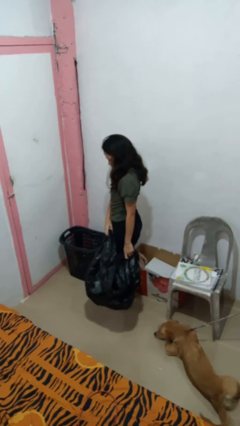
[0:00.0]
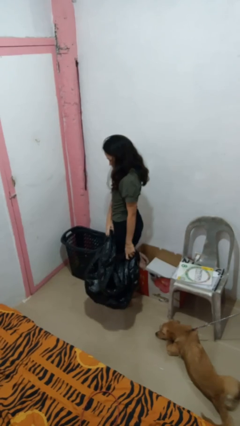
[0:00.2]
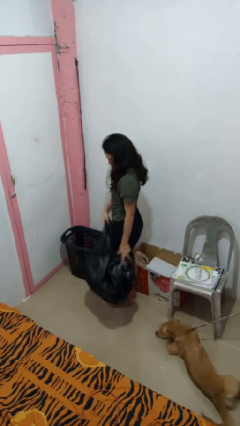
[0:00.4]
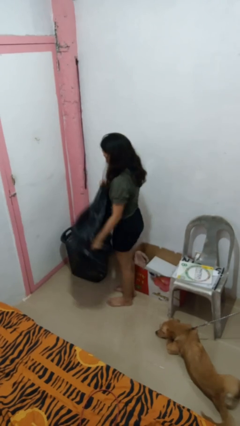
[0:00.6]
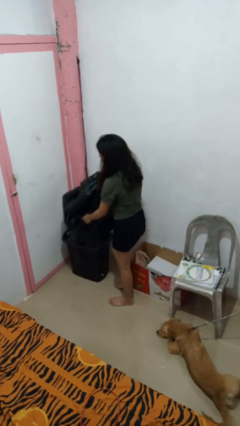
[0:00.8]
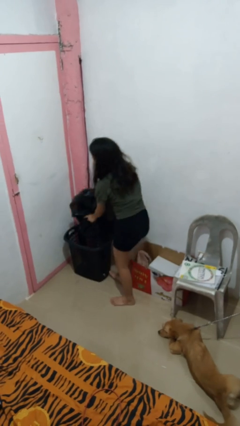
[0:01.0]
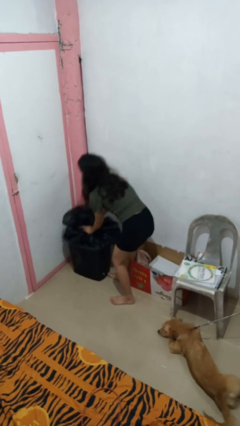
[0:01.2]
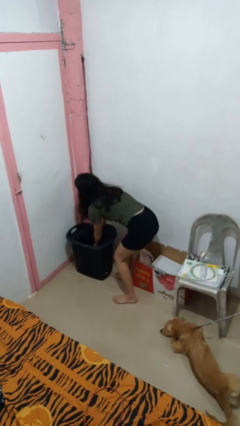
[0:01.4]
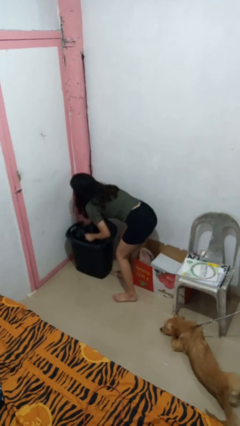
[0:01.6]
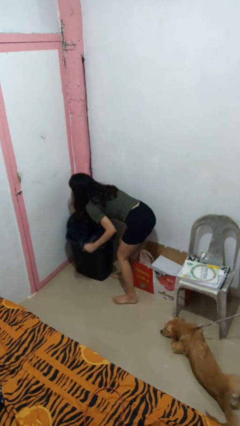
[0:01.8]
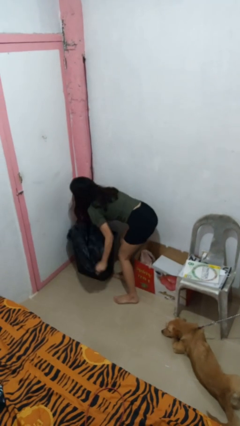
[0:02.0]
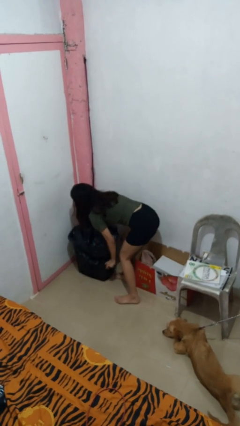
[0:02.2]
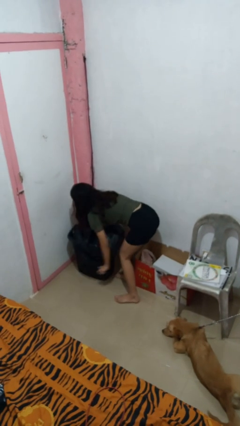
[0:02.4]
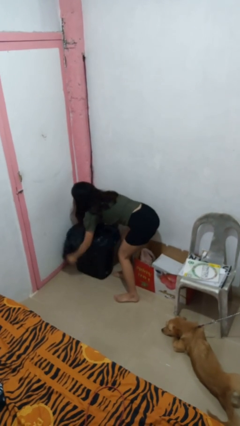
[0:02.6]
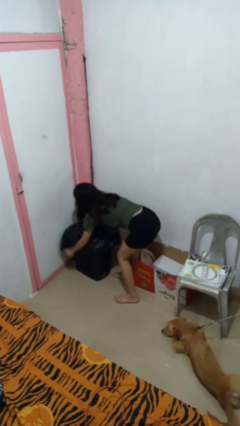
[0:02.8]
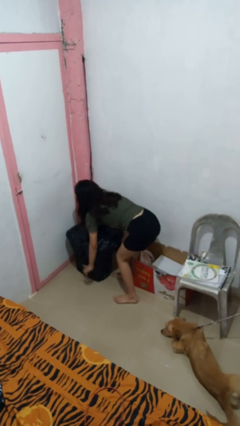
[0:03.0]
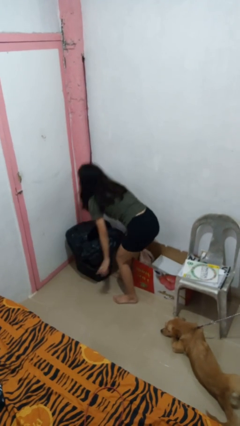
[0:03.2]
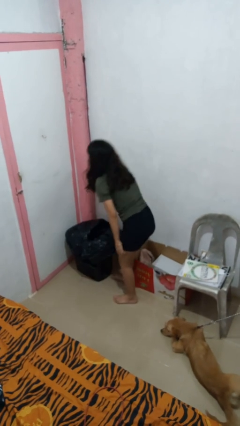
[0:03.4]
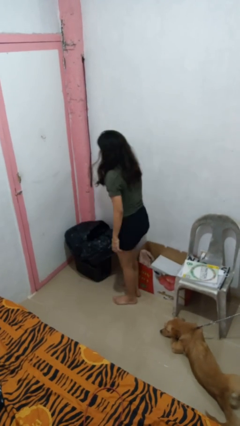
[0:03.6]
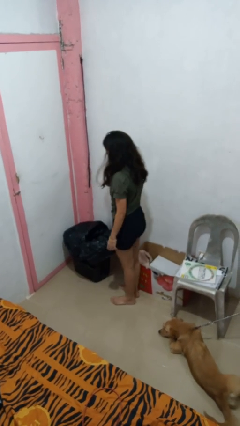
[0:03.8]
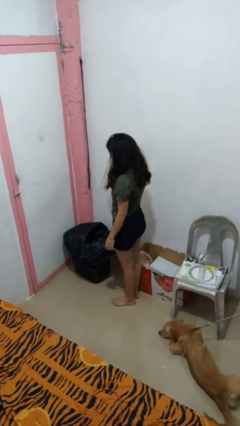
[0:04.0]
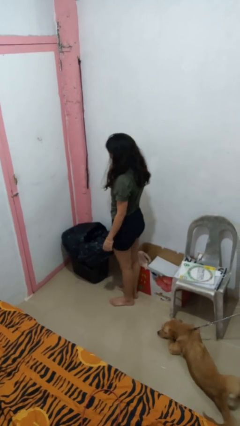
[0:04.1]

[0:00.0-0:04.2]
person inserts trashbag into trashcan

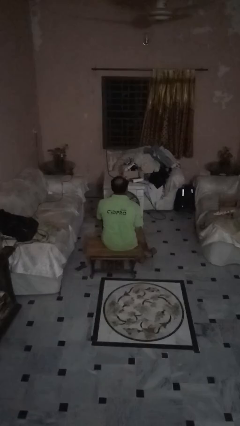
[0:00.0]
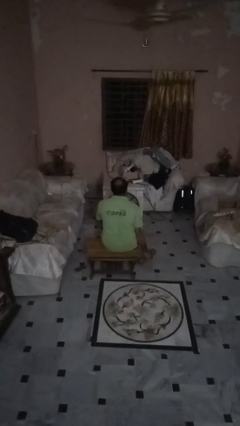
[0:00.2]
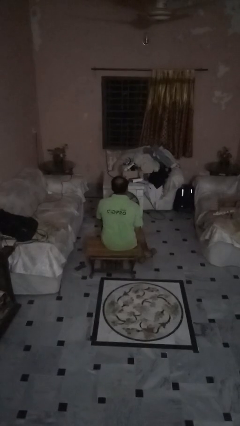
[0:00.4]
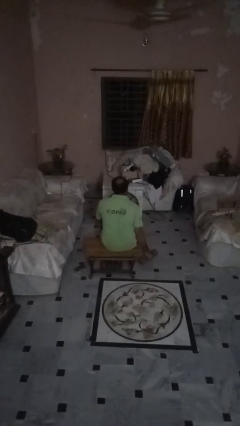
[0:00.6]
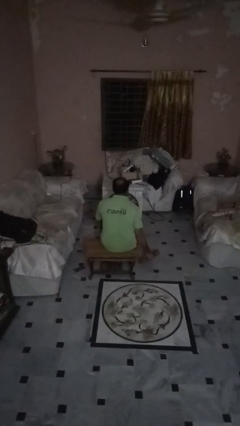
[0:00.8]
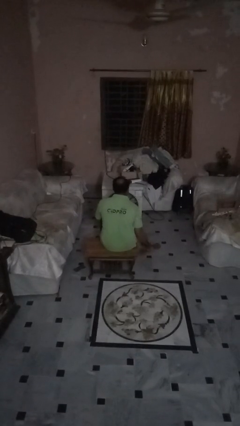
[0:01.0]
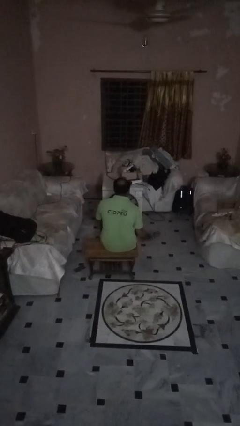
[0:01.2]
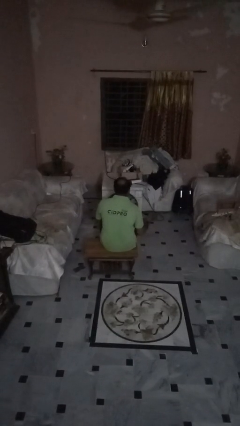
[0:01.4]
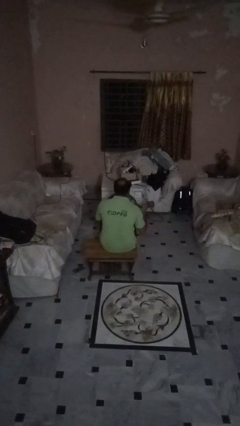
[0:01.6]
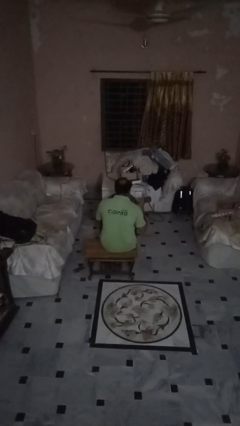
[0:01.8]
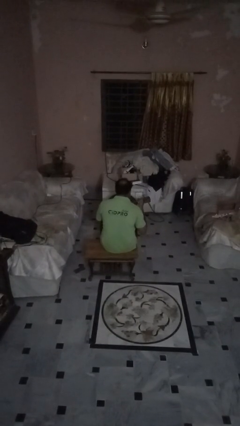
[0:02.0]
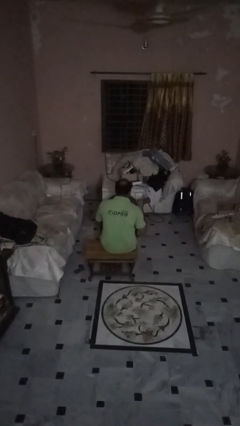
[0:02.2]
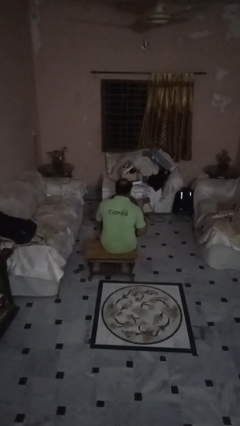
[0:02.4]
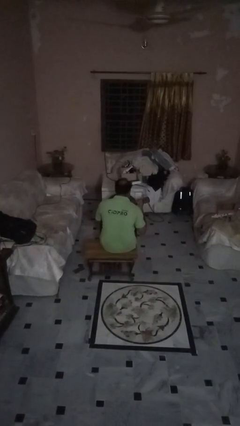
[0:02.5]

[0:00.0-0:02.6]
person lifts dumbbells

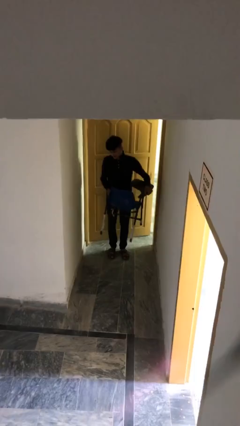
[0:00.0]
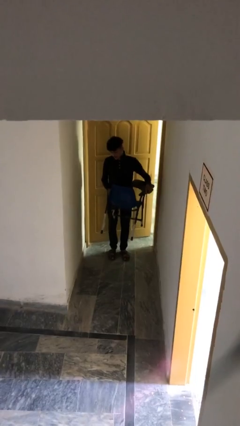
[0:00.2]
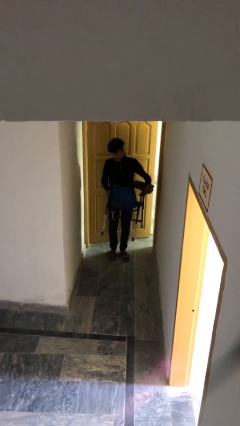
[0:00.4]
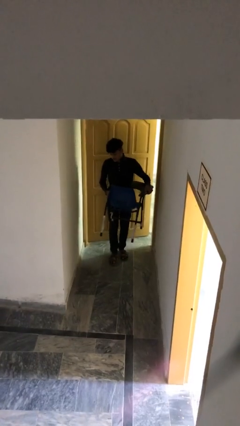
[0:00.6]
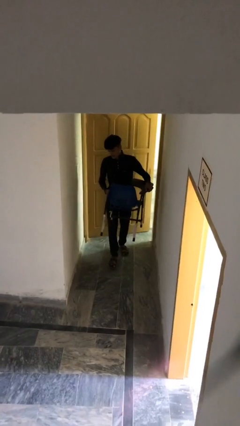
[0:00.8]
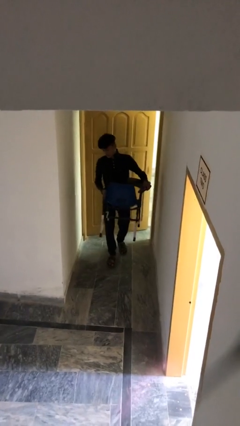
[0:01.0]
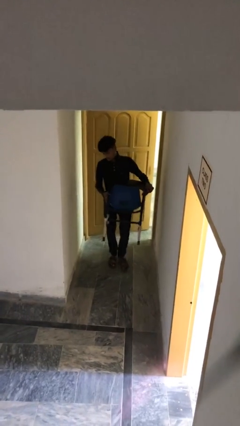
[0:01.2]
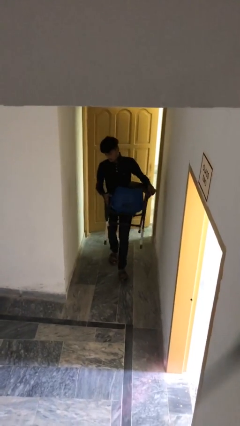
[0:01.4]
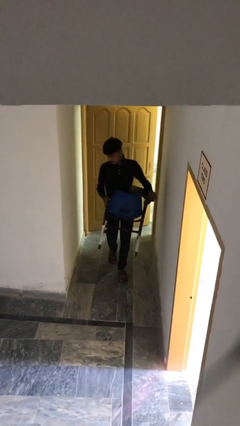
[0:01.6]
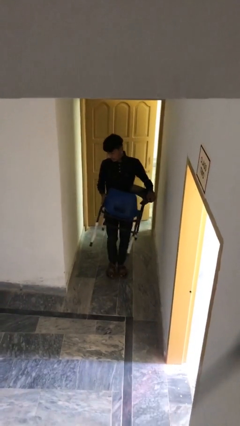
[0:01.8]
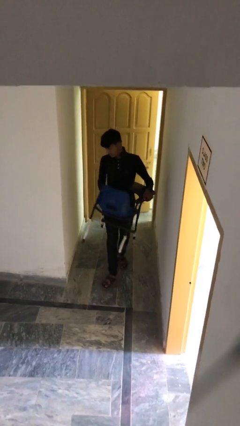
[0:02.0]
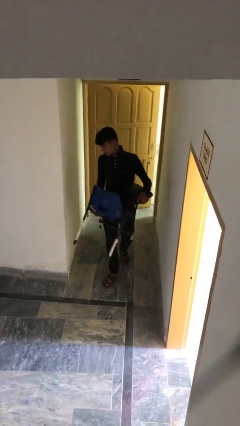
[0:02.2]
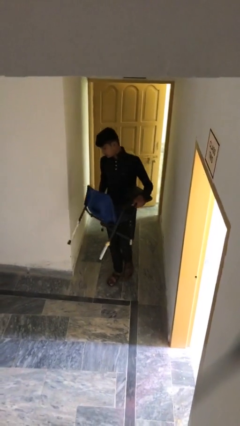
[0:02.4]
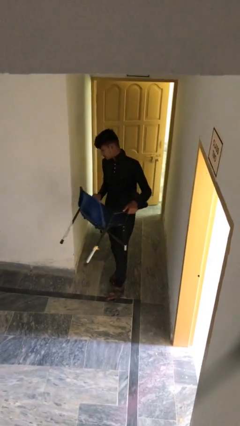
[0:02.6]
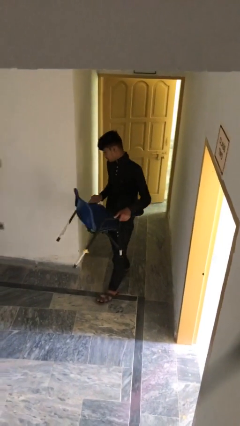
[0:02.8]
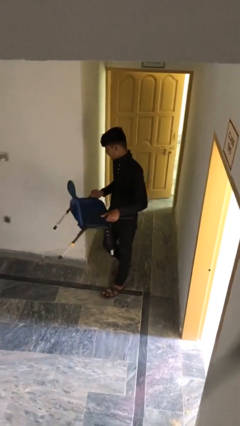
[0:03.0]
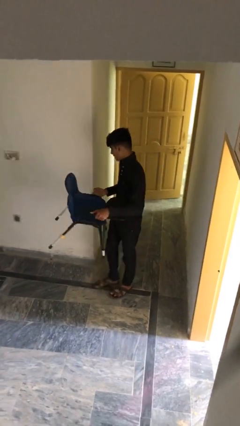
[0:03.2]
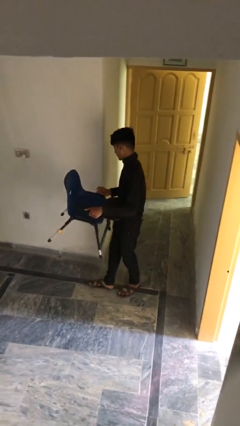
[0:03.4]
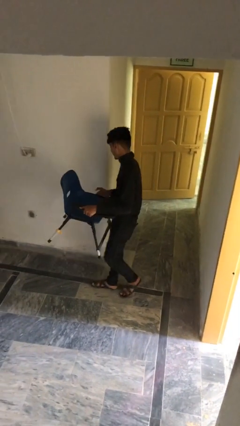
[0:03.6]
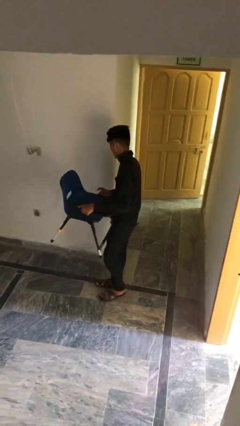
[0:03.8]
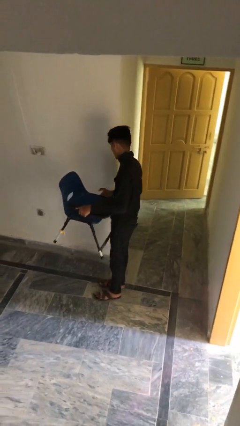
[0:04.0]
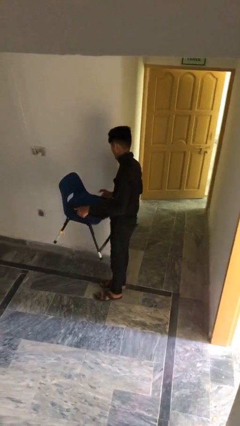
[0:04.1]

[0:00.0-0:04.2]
person carries heavy object

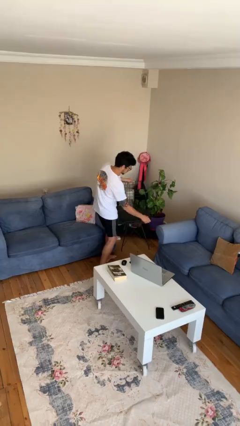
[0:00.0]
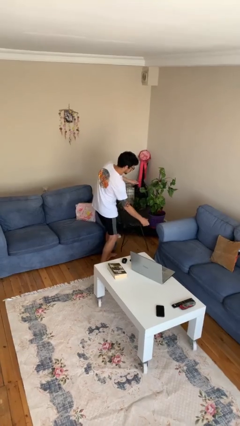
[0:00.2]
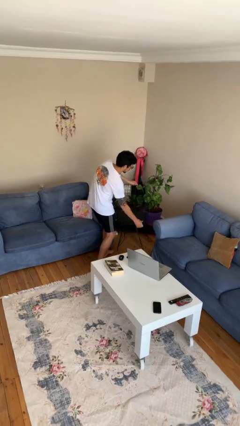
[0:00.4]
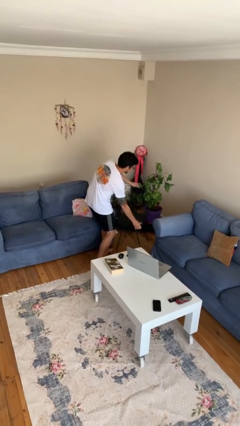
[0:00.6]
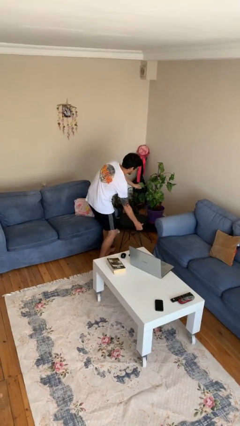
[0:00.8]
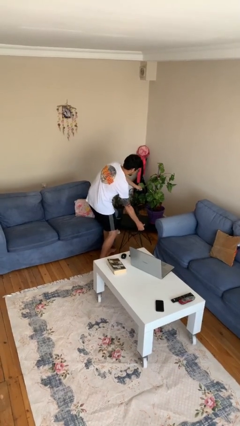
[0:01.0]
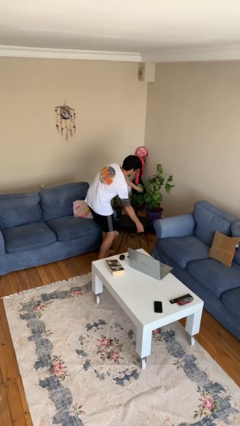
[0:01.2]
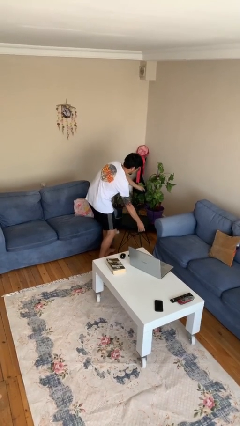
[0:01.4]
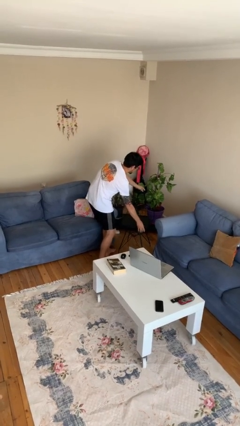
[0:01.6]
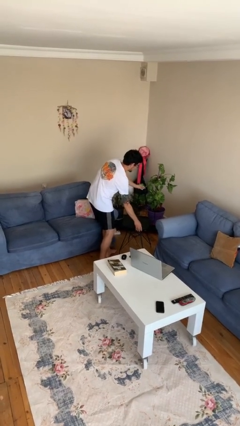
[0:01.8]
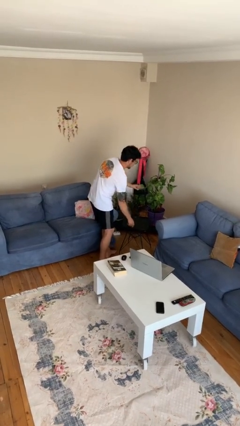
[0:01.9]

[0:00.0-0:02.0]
person puts down object on floor

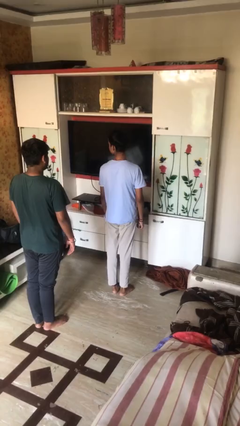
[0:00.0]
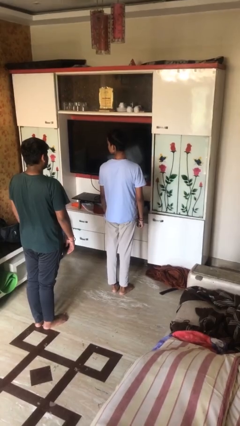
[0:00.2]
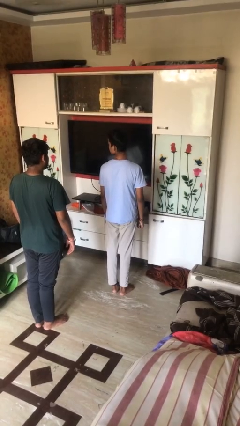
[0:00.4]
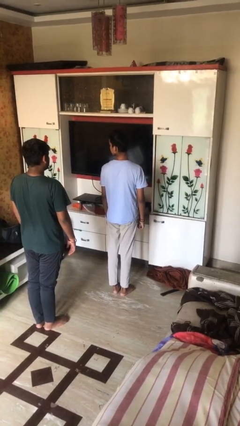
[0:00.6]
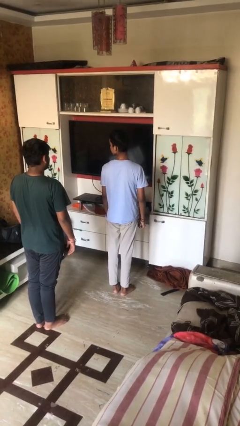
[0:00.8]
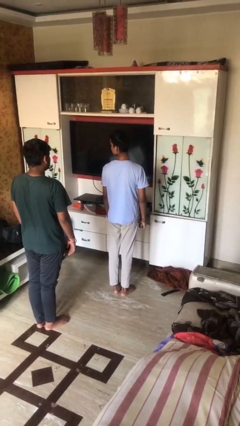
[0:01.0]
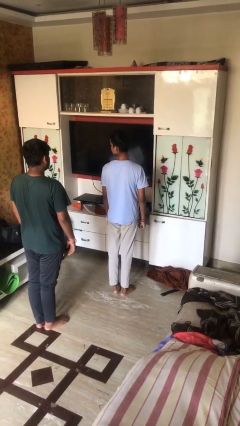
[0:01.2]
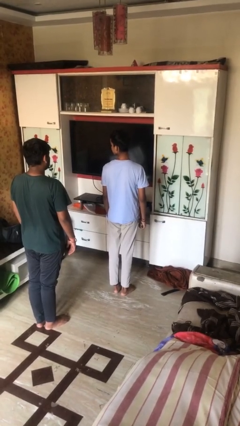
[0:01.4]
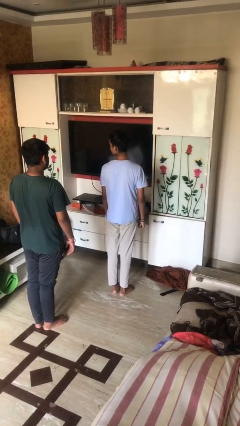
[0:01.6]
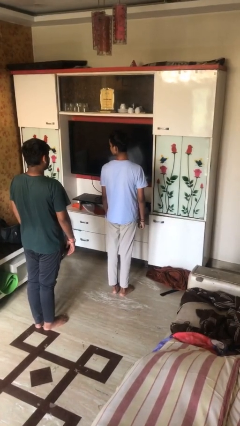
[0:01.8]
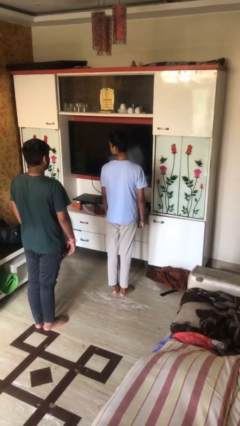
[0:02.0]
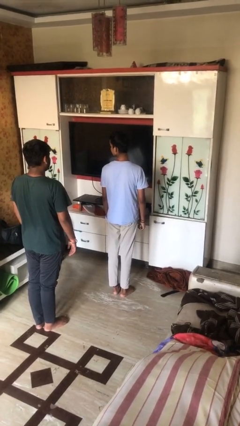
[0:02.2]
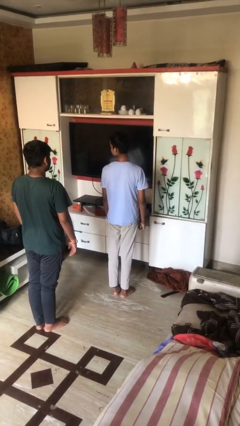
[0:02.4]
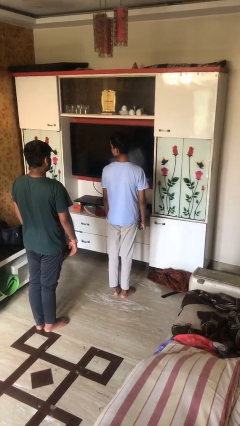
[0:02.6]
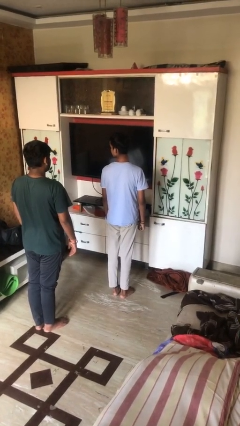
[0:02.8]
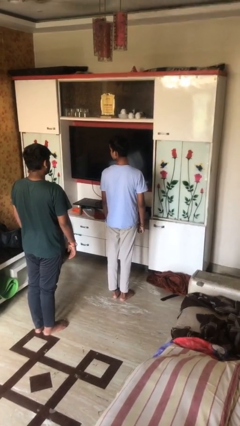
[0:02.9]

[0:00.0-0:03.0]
person looks over shoulder

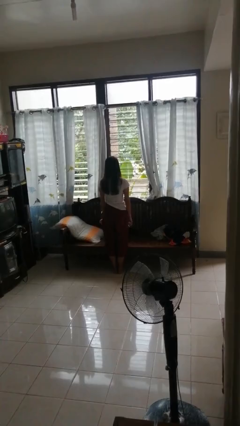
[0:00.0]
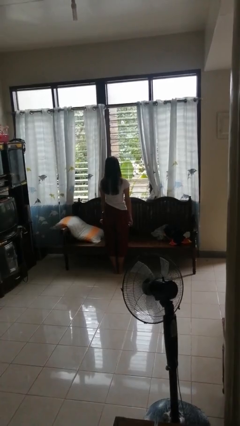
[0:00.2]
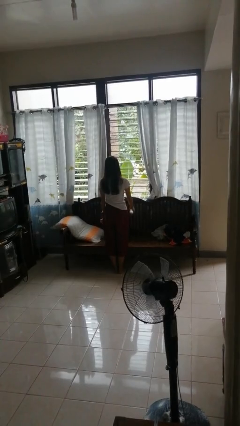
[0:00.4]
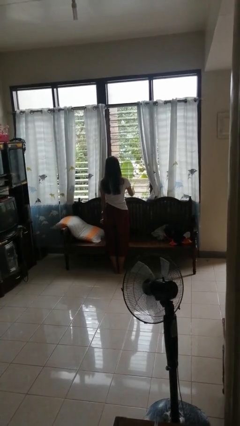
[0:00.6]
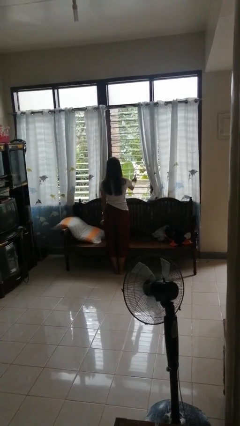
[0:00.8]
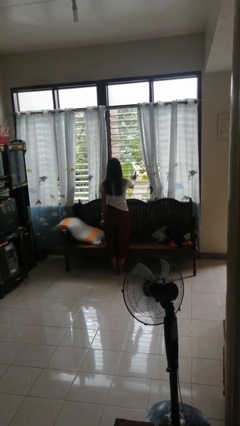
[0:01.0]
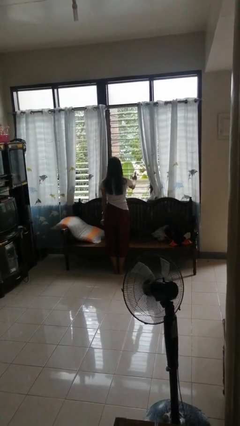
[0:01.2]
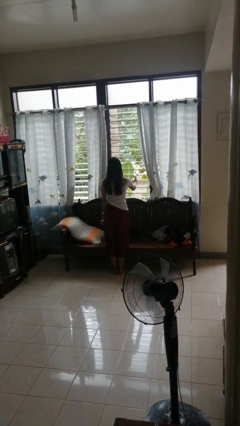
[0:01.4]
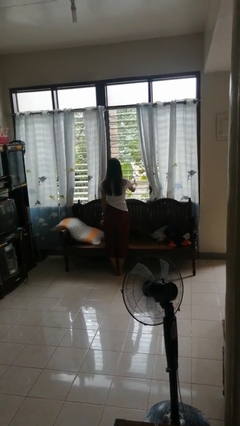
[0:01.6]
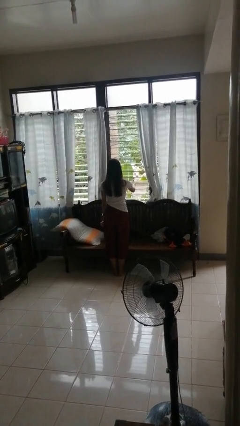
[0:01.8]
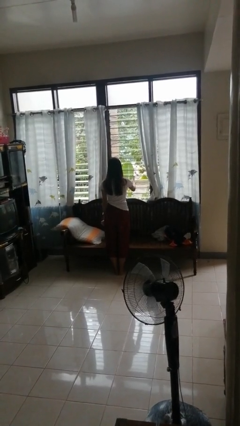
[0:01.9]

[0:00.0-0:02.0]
person sprays from bottle
